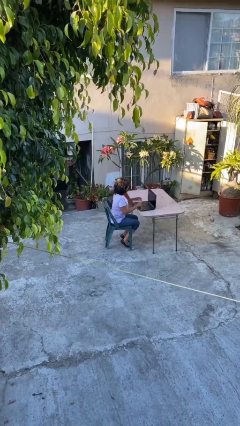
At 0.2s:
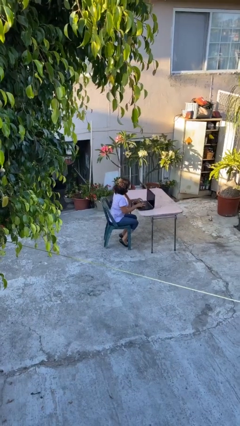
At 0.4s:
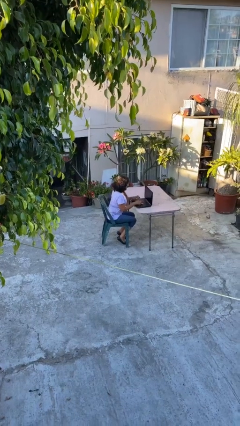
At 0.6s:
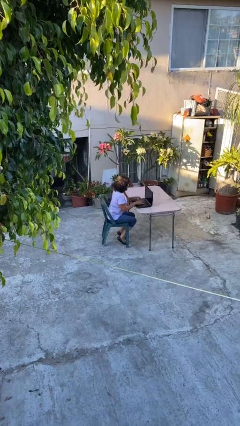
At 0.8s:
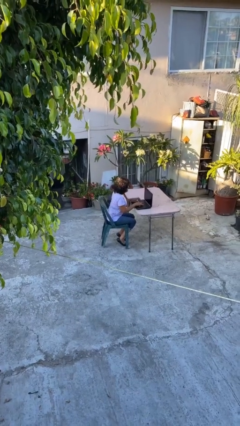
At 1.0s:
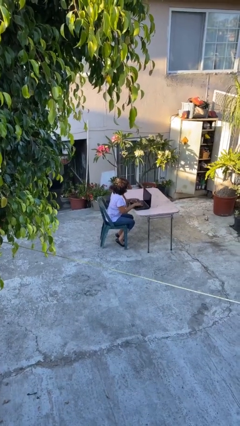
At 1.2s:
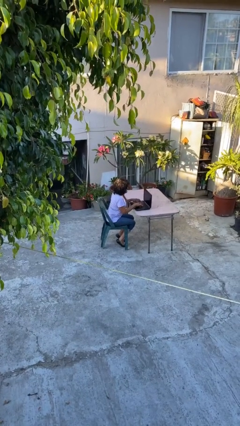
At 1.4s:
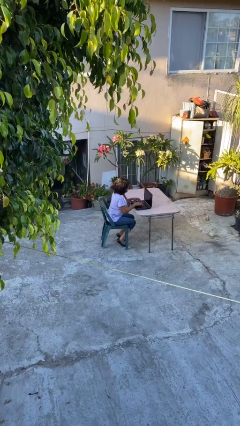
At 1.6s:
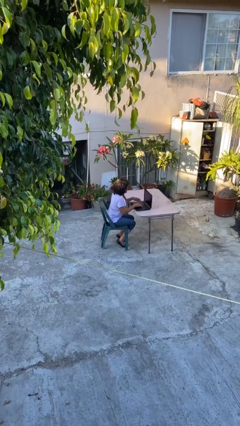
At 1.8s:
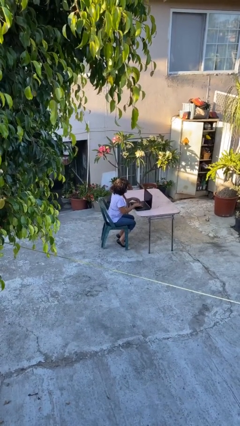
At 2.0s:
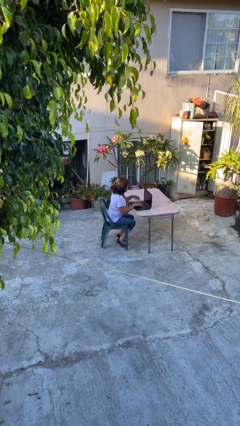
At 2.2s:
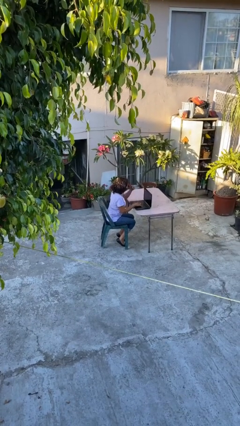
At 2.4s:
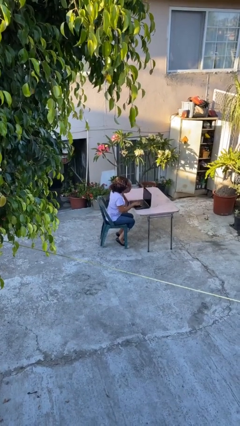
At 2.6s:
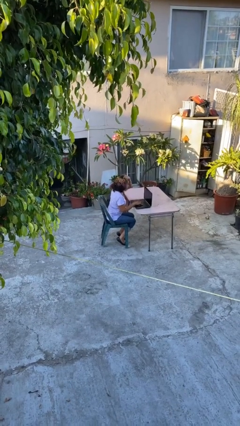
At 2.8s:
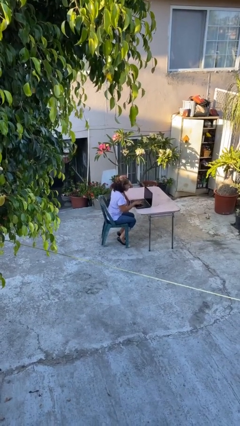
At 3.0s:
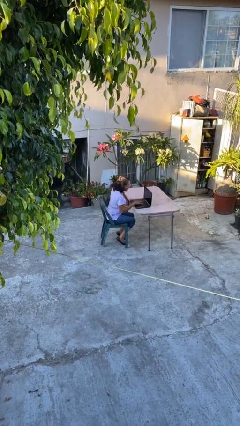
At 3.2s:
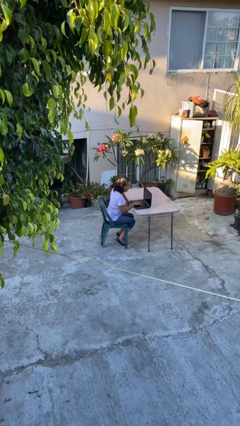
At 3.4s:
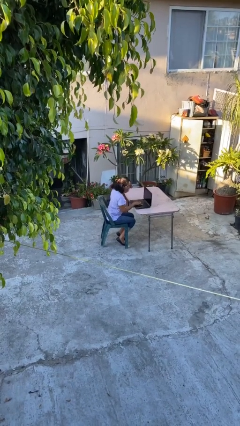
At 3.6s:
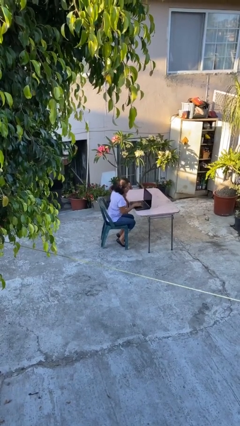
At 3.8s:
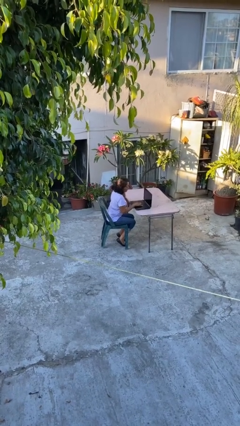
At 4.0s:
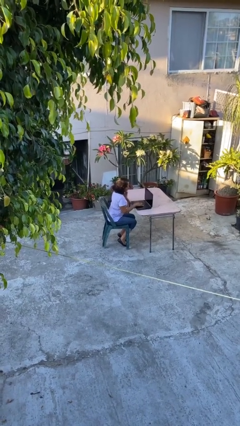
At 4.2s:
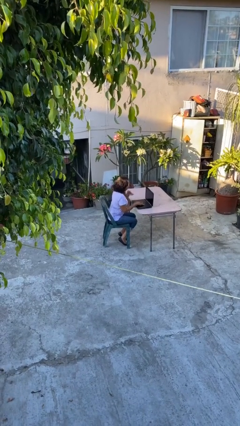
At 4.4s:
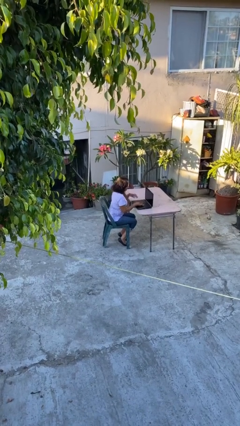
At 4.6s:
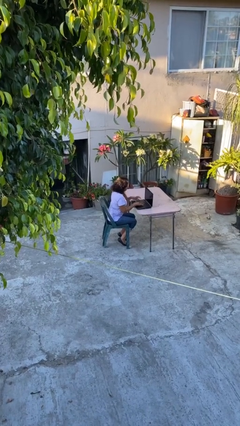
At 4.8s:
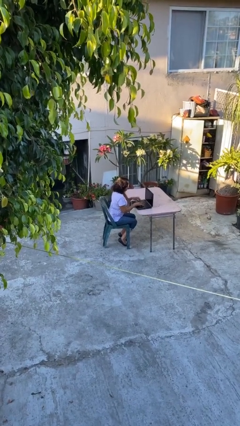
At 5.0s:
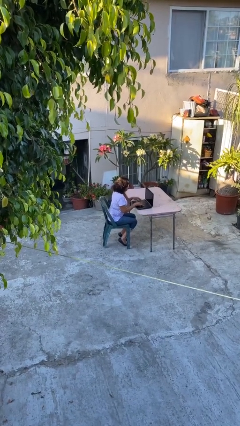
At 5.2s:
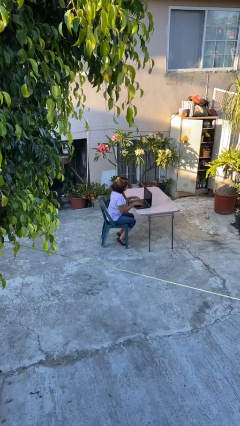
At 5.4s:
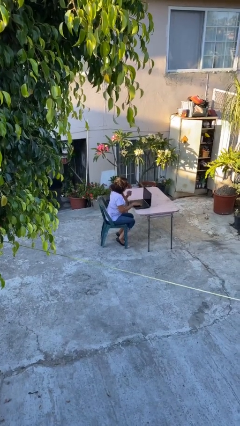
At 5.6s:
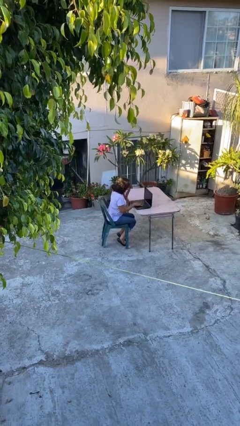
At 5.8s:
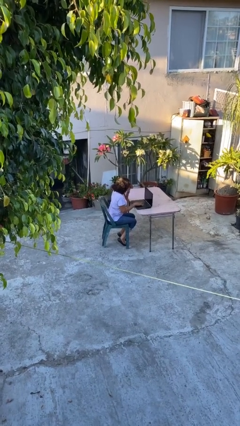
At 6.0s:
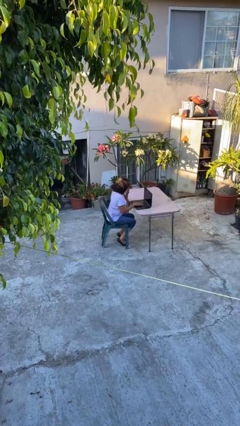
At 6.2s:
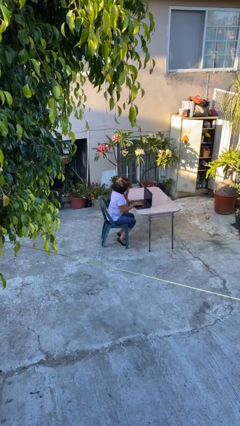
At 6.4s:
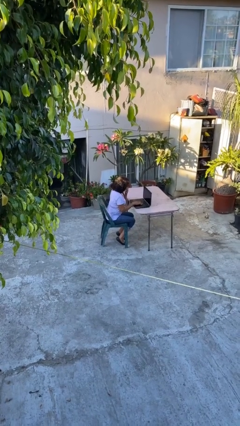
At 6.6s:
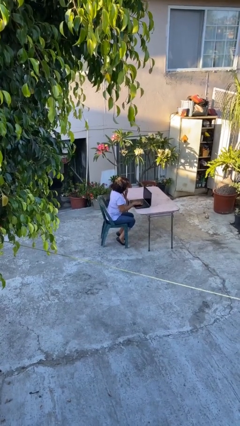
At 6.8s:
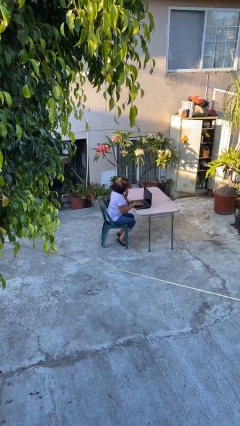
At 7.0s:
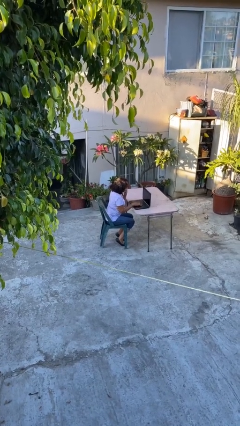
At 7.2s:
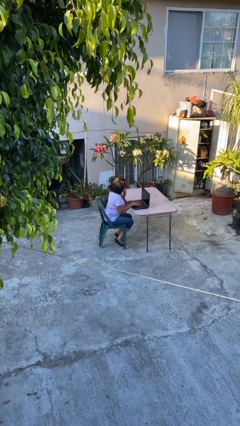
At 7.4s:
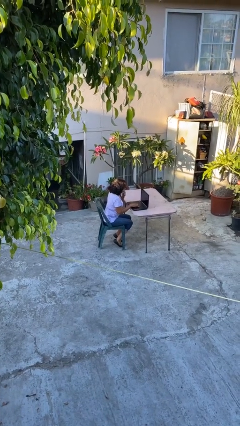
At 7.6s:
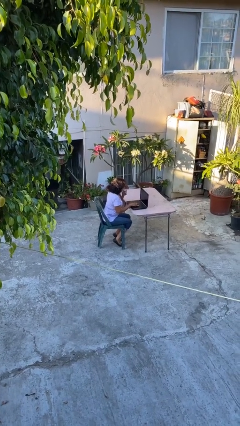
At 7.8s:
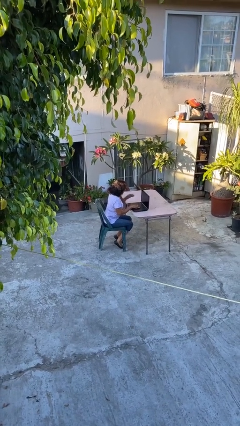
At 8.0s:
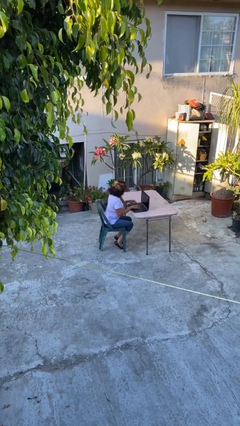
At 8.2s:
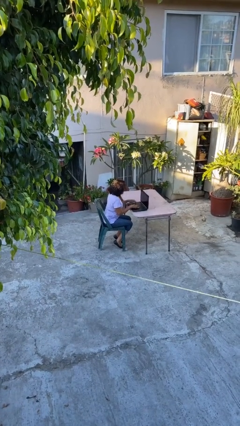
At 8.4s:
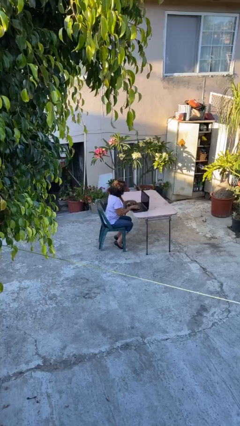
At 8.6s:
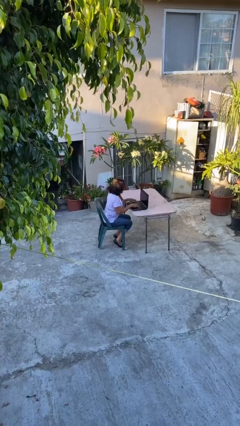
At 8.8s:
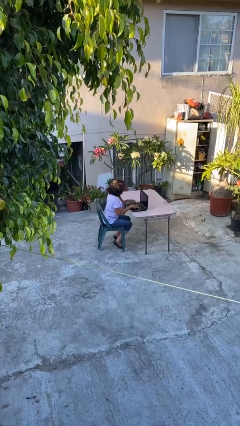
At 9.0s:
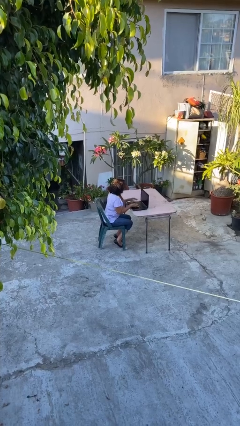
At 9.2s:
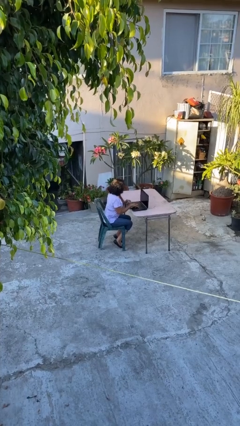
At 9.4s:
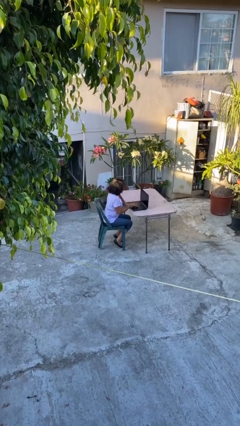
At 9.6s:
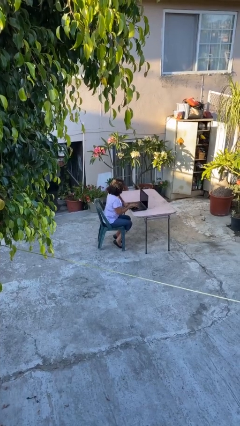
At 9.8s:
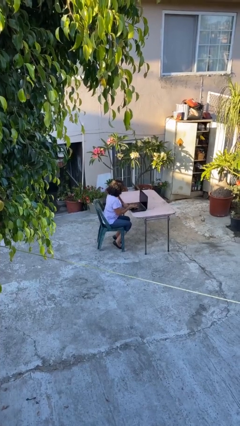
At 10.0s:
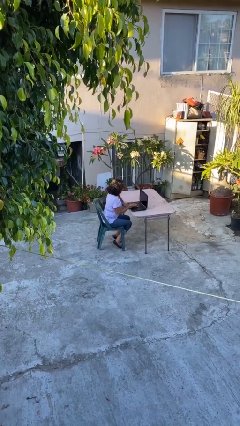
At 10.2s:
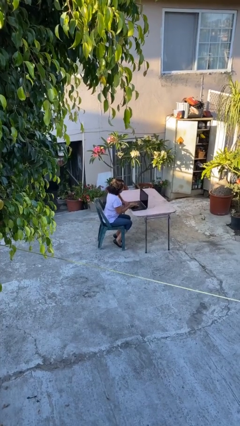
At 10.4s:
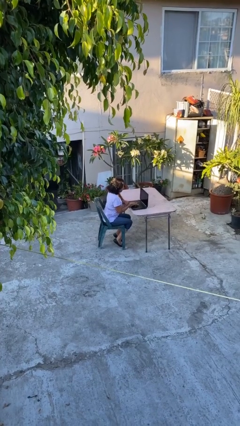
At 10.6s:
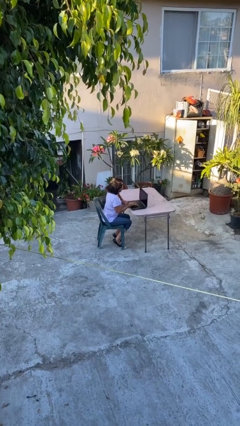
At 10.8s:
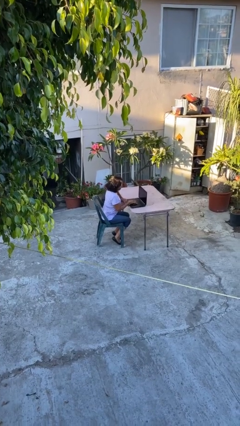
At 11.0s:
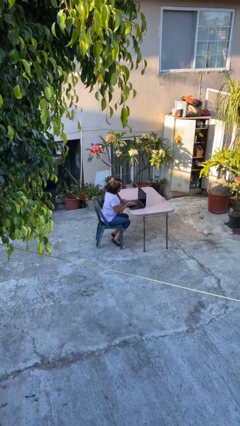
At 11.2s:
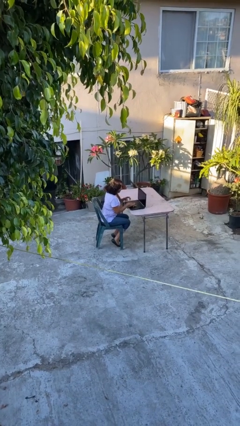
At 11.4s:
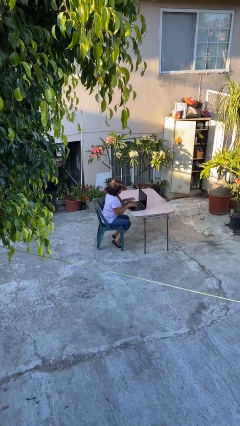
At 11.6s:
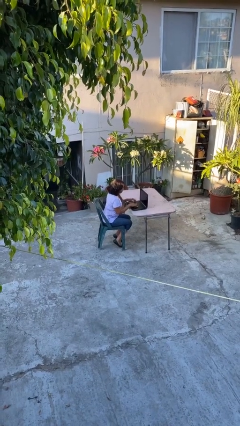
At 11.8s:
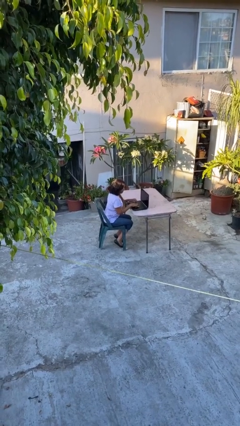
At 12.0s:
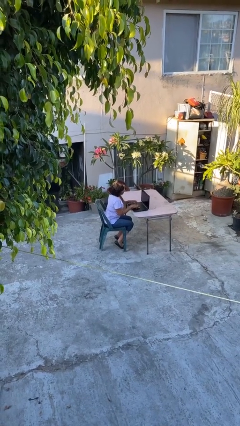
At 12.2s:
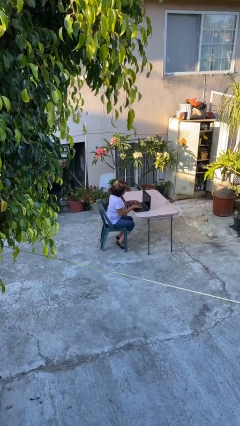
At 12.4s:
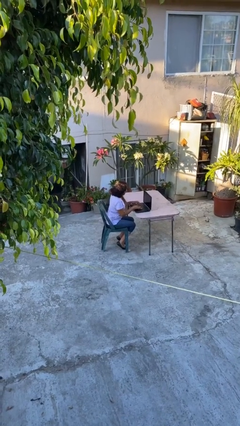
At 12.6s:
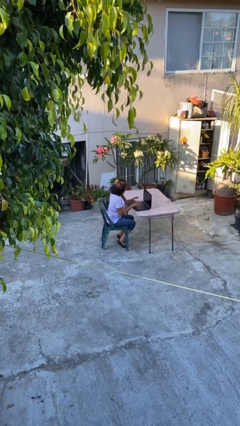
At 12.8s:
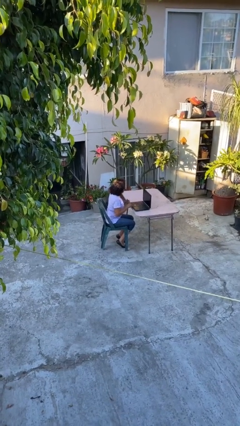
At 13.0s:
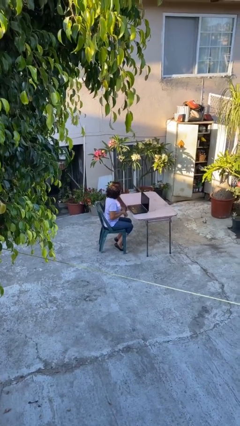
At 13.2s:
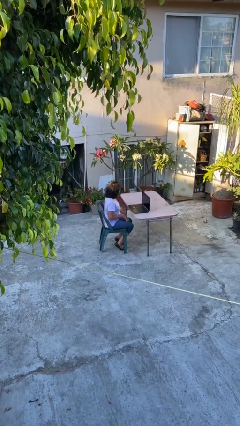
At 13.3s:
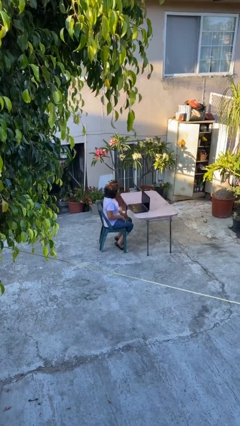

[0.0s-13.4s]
person interacts with laptop

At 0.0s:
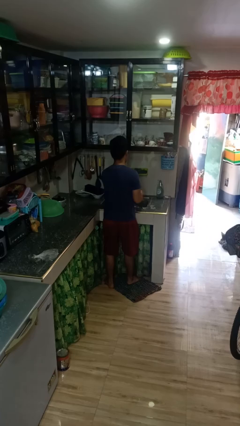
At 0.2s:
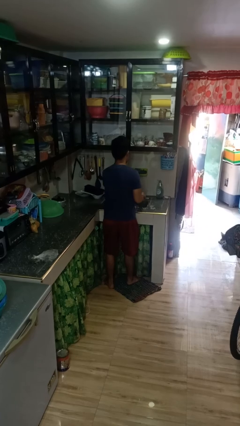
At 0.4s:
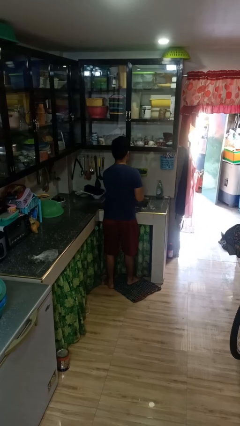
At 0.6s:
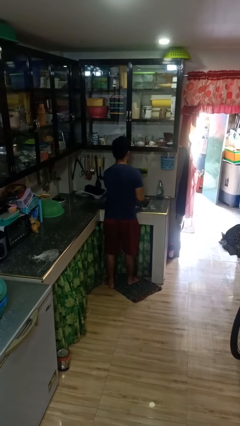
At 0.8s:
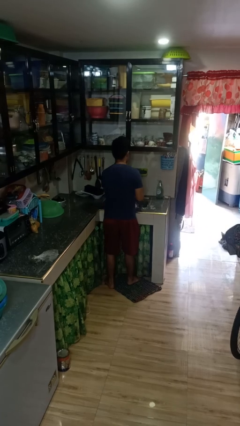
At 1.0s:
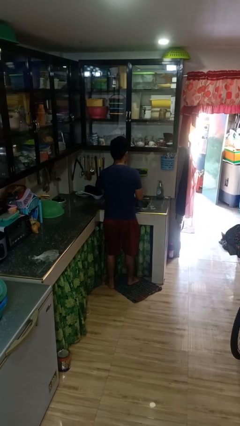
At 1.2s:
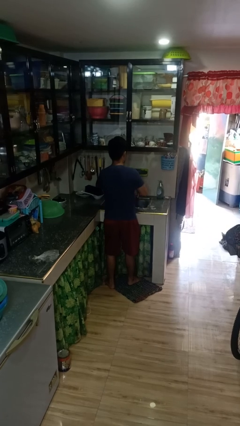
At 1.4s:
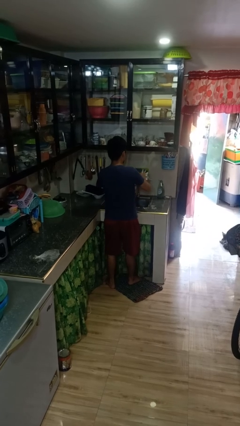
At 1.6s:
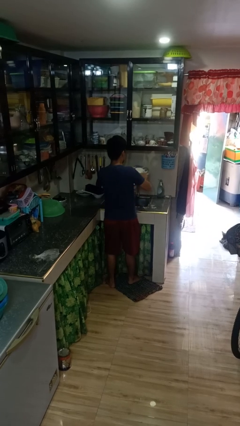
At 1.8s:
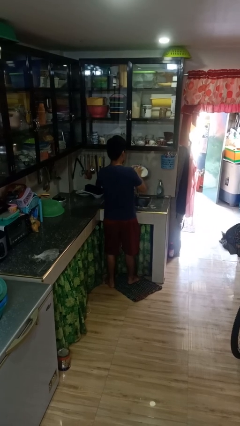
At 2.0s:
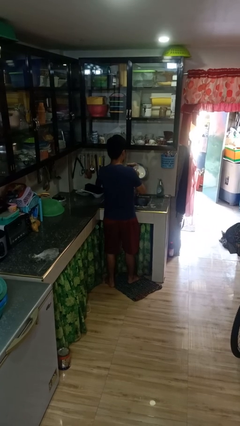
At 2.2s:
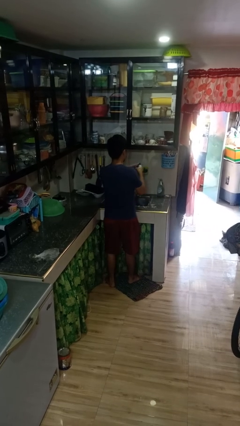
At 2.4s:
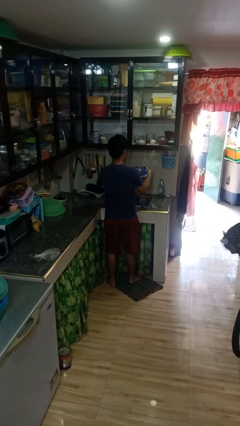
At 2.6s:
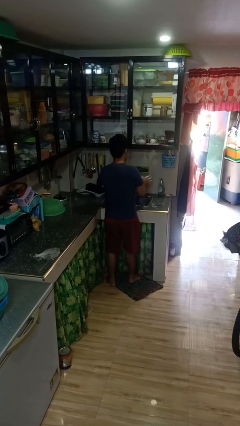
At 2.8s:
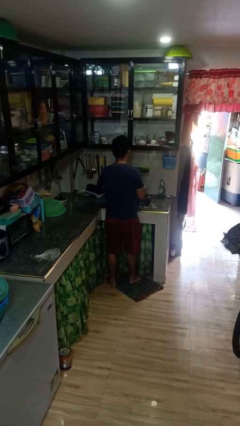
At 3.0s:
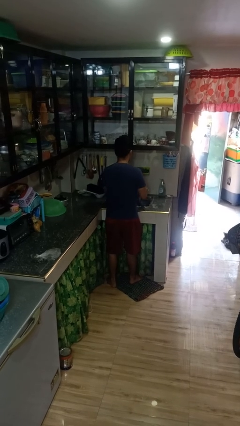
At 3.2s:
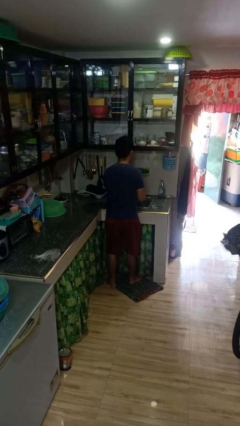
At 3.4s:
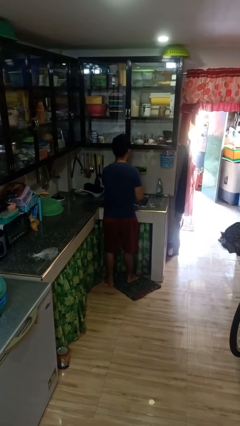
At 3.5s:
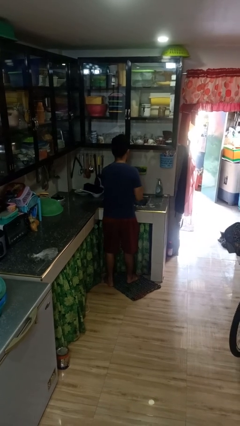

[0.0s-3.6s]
person washes dish

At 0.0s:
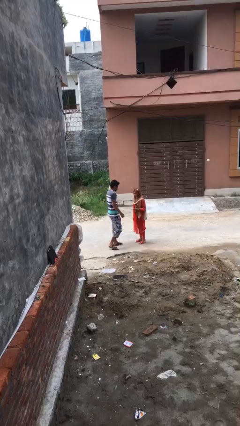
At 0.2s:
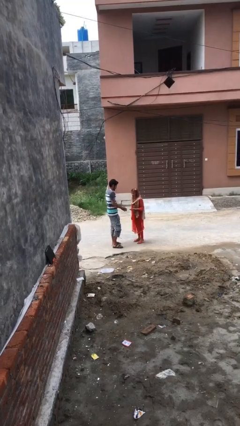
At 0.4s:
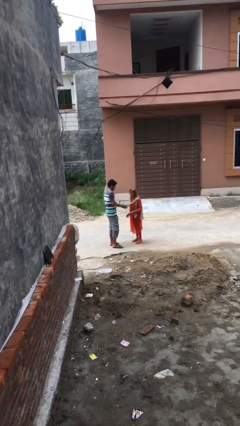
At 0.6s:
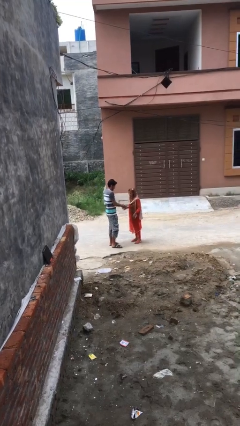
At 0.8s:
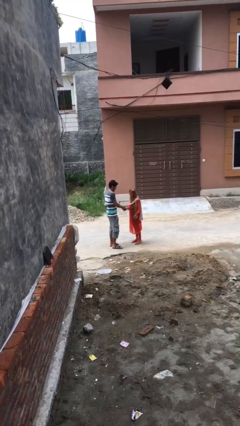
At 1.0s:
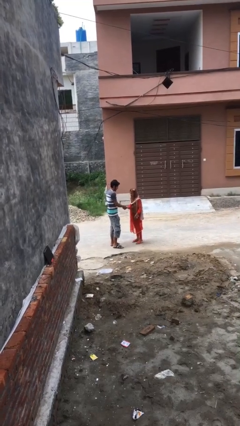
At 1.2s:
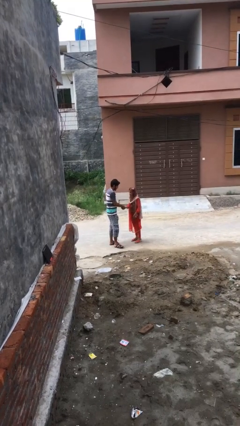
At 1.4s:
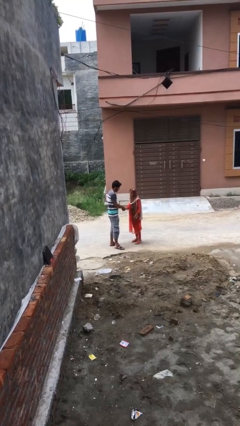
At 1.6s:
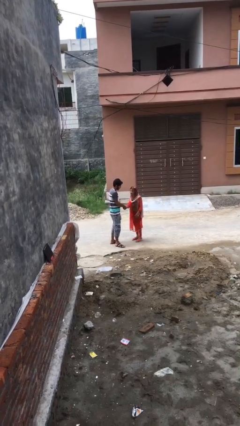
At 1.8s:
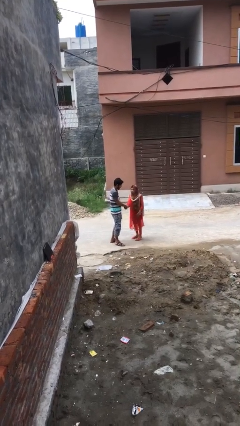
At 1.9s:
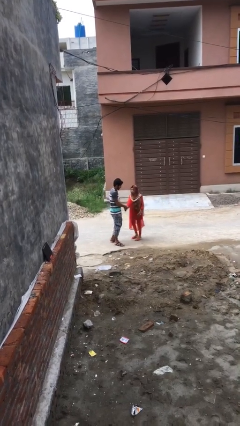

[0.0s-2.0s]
person shakes hand
